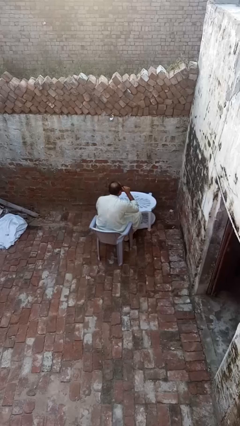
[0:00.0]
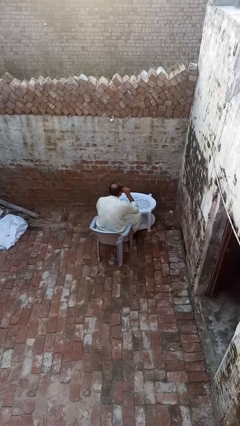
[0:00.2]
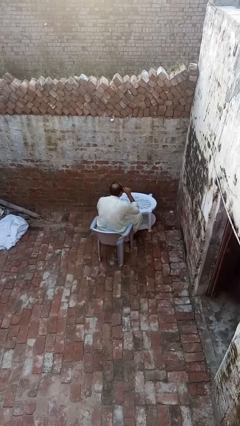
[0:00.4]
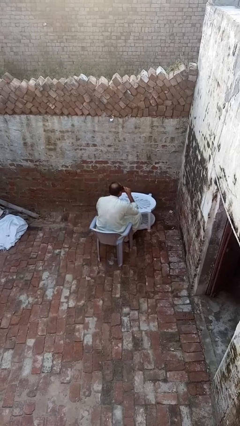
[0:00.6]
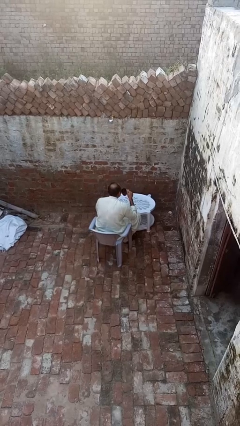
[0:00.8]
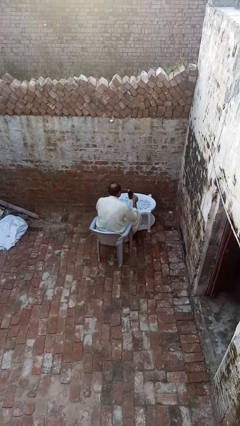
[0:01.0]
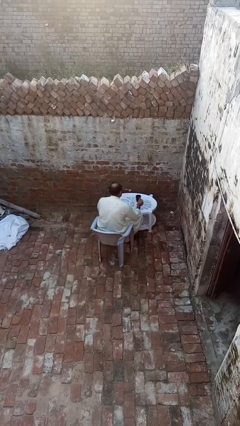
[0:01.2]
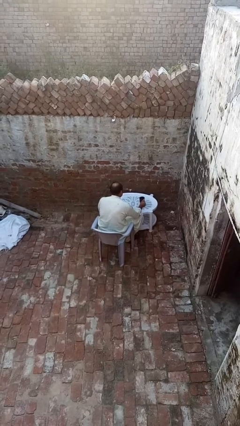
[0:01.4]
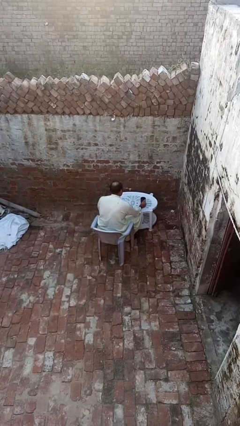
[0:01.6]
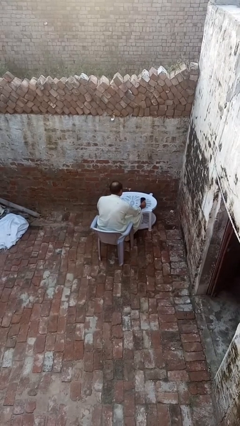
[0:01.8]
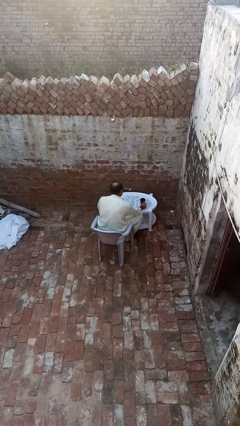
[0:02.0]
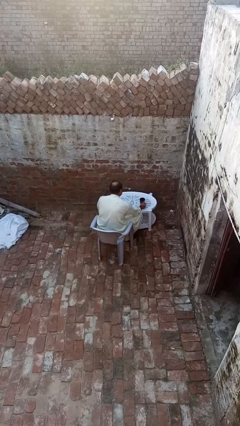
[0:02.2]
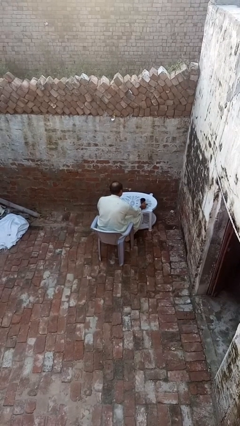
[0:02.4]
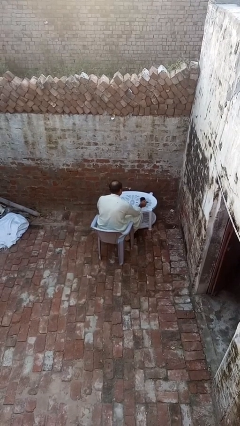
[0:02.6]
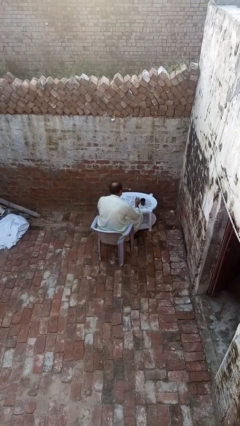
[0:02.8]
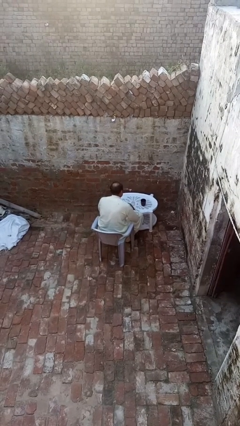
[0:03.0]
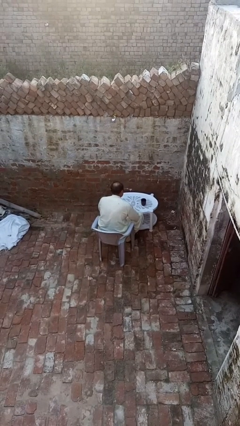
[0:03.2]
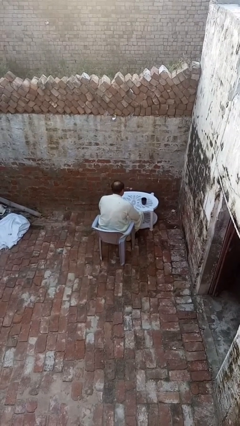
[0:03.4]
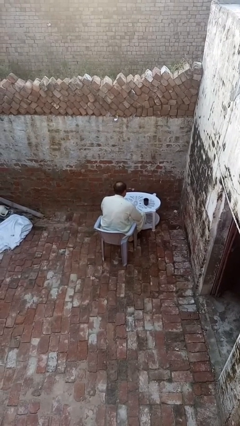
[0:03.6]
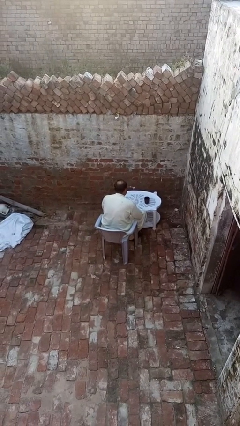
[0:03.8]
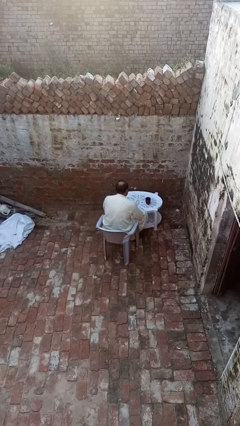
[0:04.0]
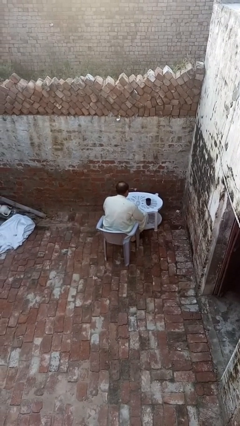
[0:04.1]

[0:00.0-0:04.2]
person puts down object on table

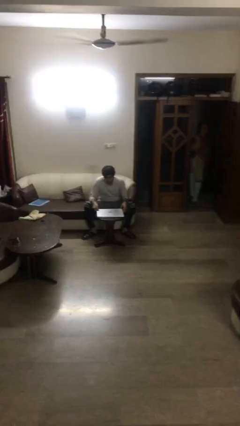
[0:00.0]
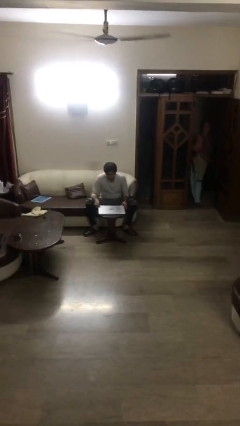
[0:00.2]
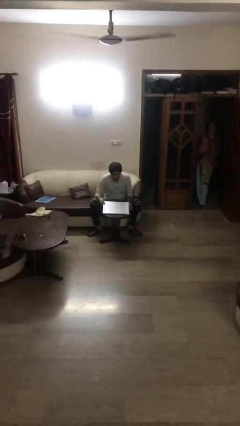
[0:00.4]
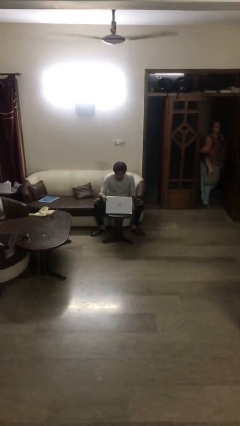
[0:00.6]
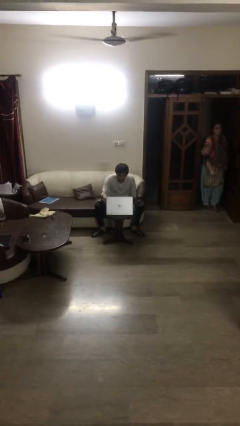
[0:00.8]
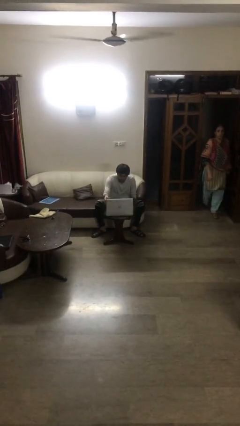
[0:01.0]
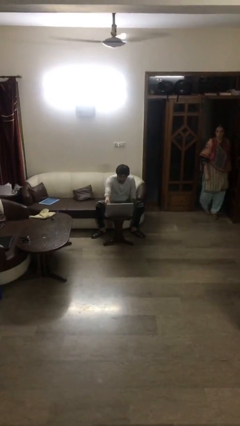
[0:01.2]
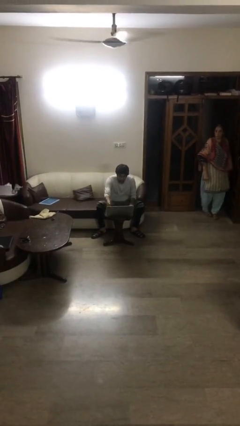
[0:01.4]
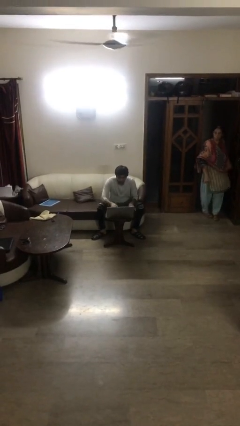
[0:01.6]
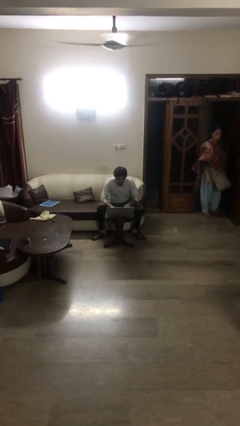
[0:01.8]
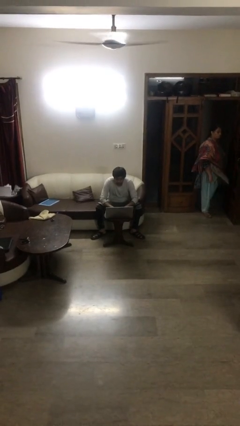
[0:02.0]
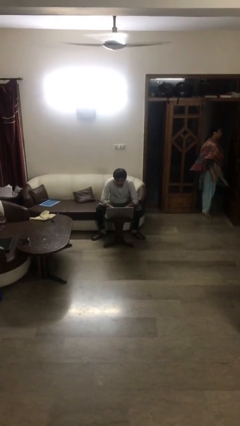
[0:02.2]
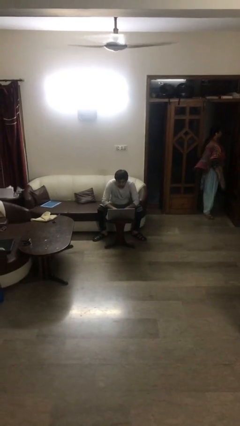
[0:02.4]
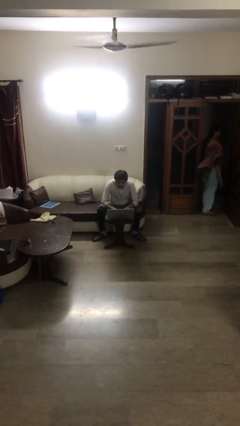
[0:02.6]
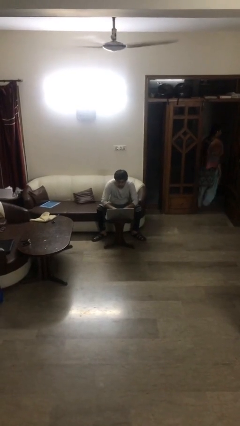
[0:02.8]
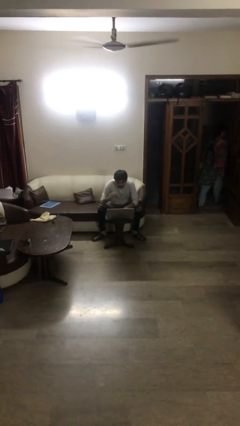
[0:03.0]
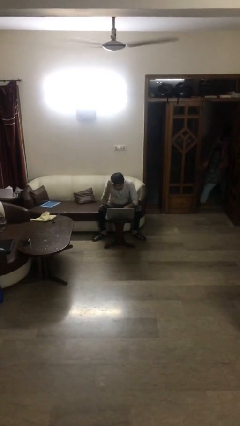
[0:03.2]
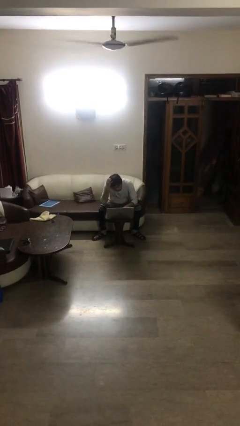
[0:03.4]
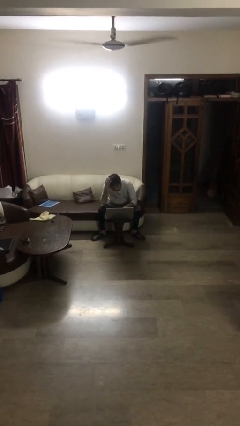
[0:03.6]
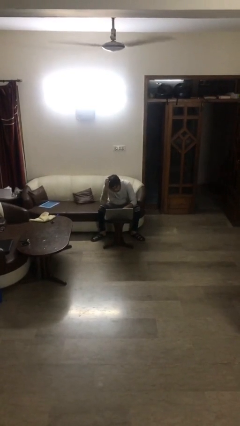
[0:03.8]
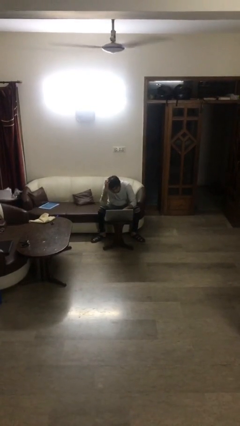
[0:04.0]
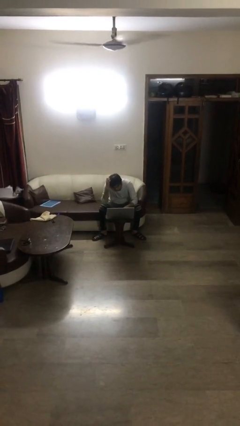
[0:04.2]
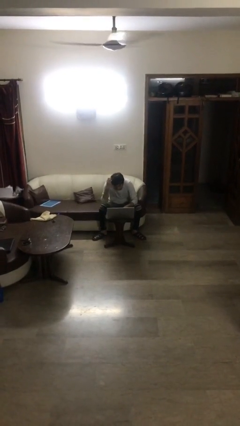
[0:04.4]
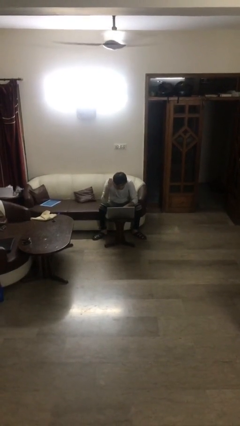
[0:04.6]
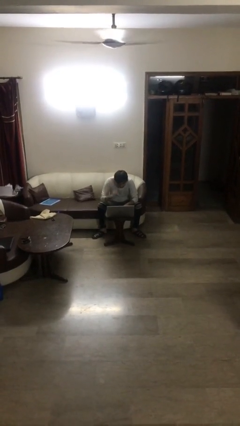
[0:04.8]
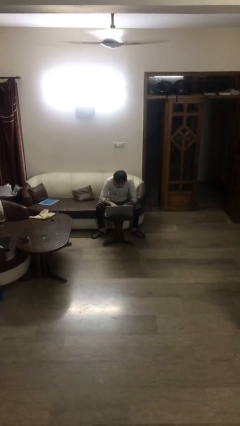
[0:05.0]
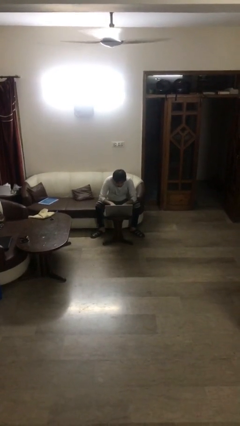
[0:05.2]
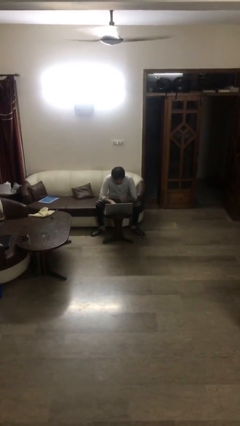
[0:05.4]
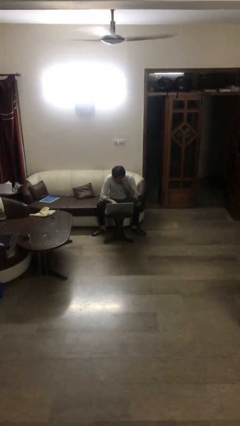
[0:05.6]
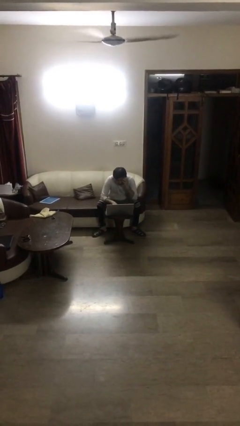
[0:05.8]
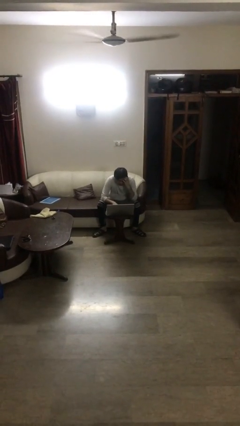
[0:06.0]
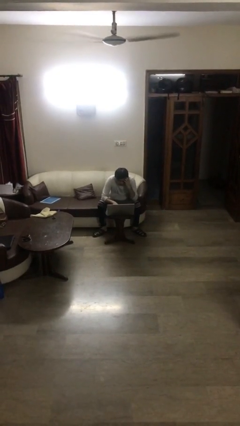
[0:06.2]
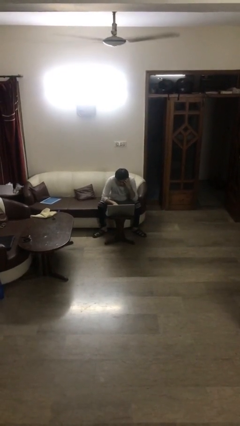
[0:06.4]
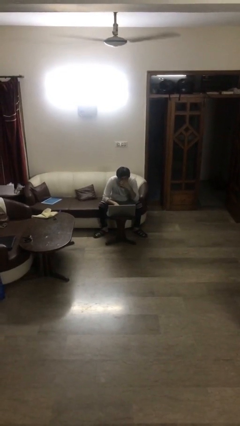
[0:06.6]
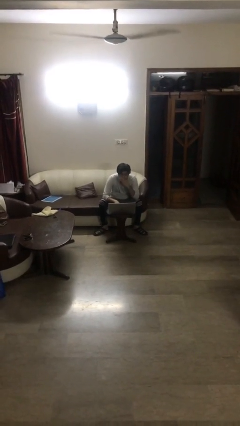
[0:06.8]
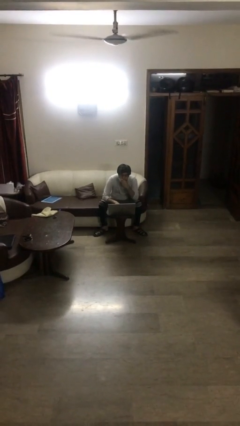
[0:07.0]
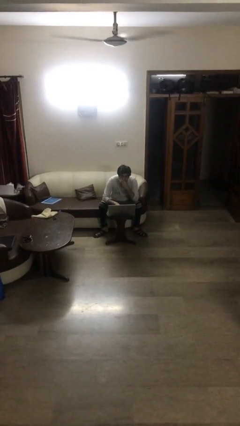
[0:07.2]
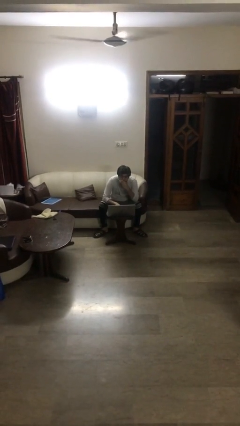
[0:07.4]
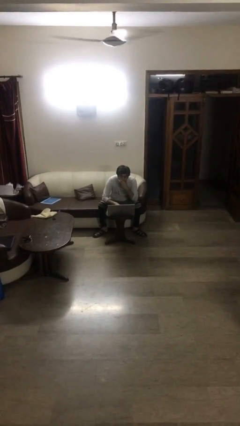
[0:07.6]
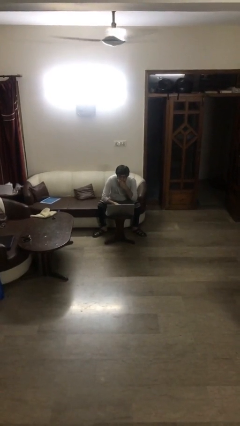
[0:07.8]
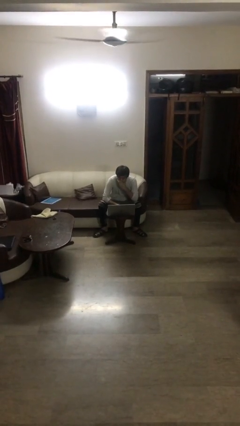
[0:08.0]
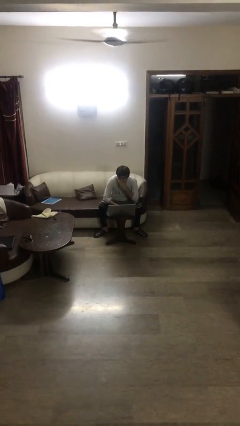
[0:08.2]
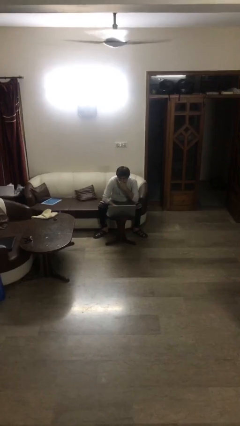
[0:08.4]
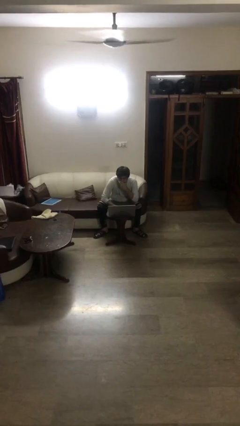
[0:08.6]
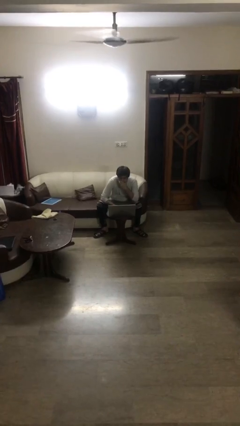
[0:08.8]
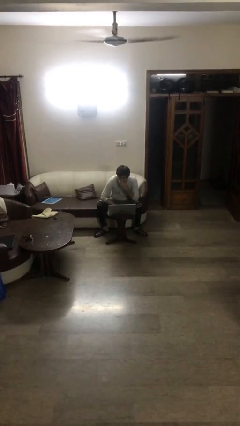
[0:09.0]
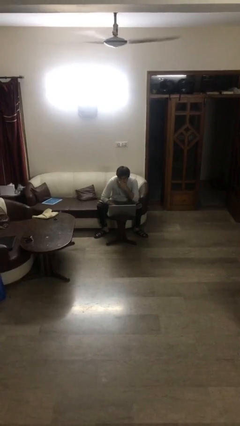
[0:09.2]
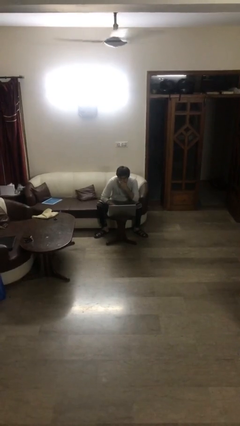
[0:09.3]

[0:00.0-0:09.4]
person interacts with laptop

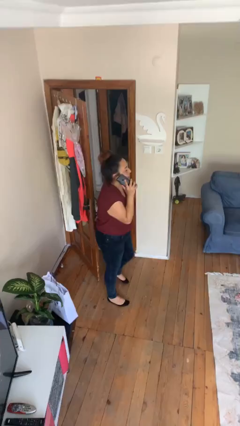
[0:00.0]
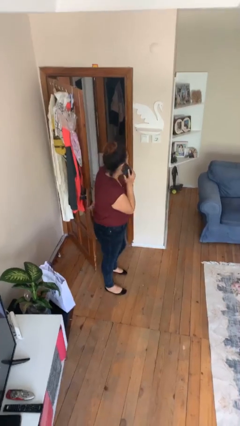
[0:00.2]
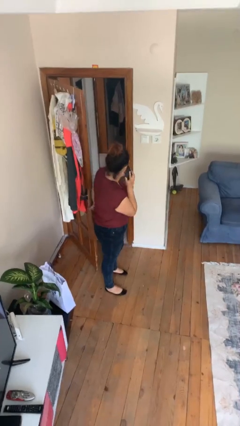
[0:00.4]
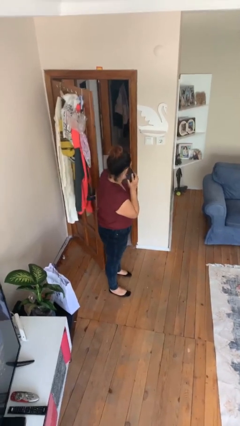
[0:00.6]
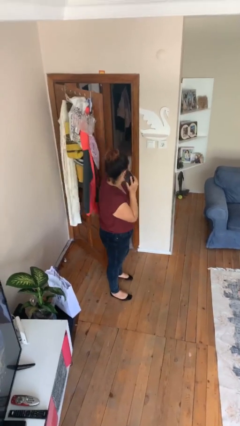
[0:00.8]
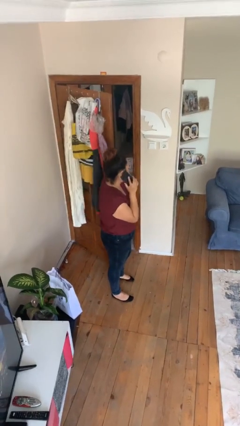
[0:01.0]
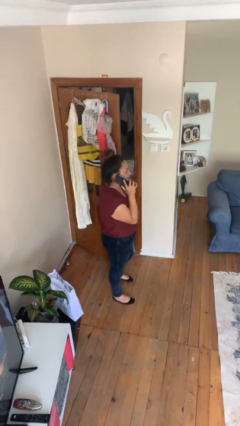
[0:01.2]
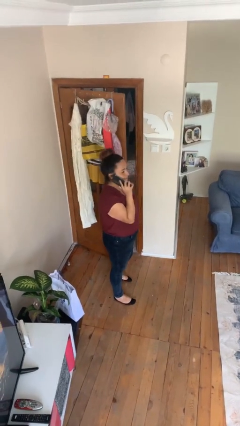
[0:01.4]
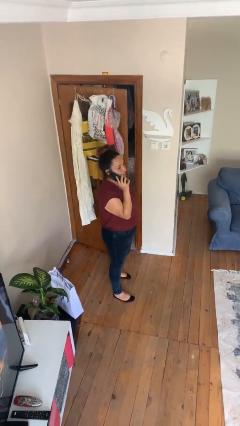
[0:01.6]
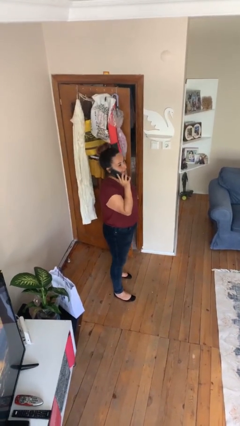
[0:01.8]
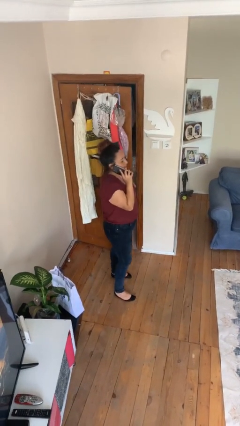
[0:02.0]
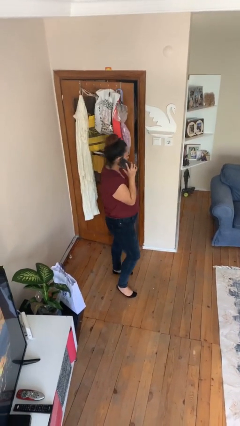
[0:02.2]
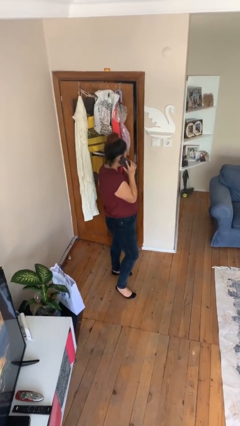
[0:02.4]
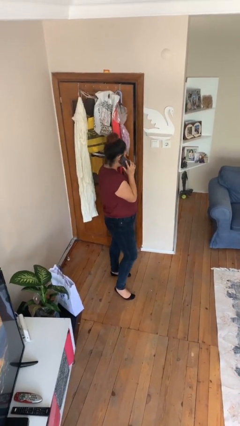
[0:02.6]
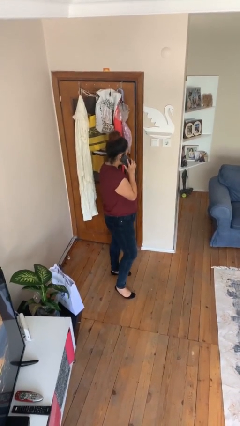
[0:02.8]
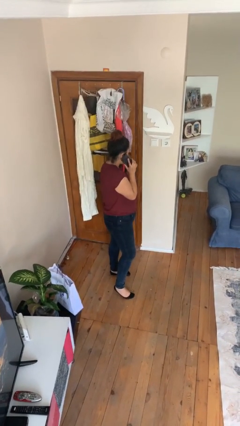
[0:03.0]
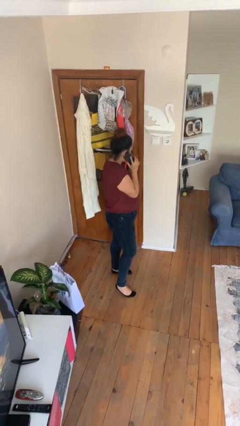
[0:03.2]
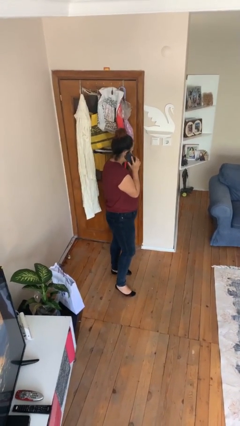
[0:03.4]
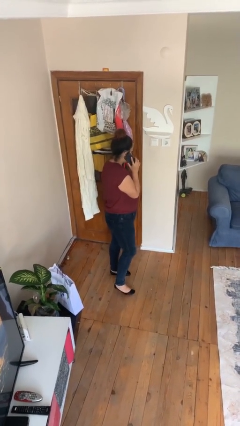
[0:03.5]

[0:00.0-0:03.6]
person closes facility door

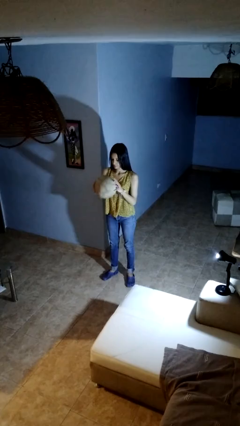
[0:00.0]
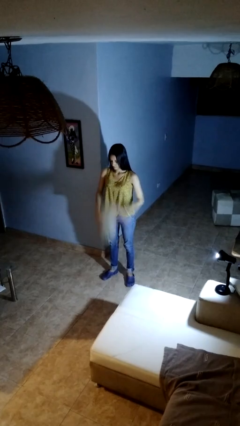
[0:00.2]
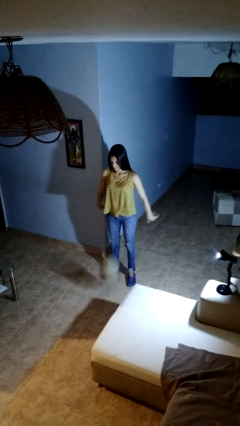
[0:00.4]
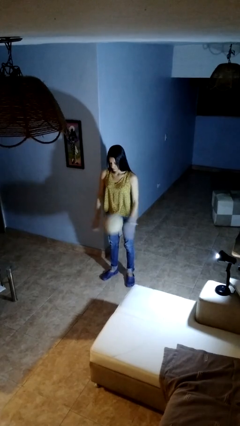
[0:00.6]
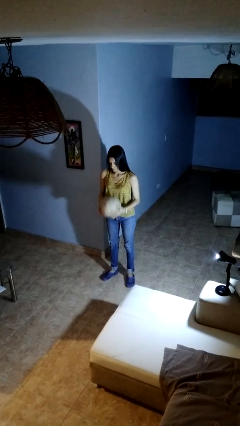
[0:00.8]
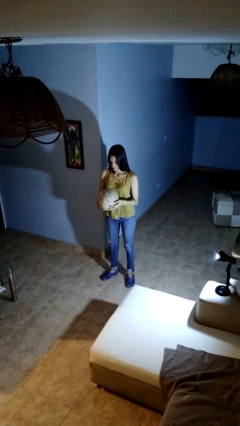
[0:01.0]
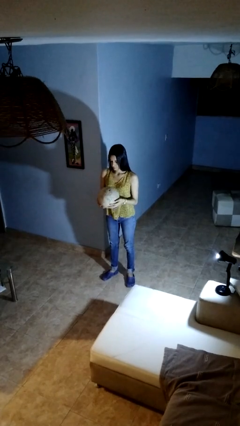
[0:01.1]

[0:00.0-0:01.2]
person bounces ball on floor
